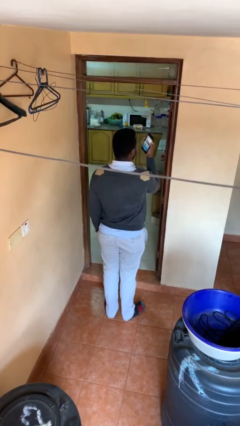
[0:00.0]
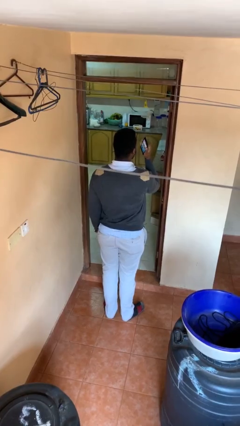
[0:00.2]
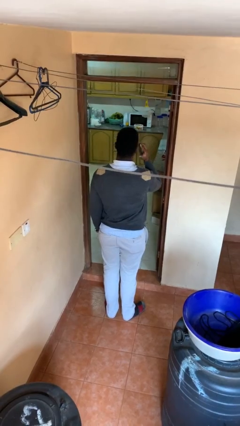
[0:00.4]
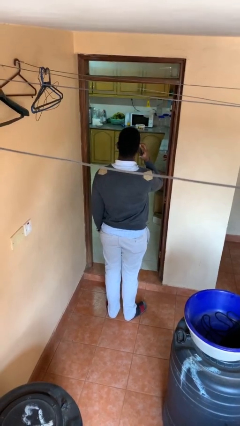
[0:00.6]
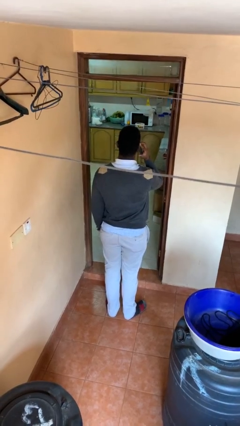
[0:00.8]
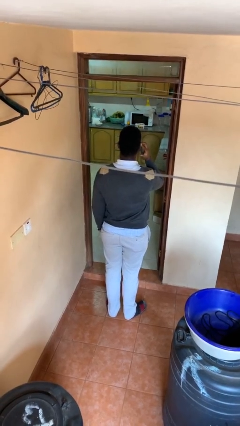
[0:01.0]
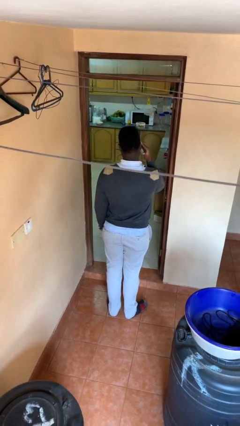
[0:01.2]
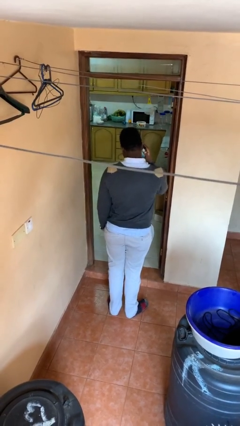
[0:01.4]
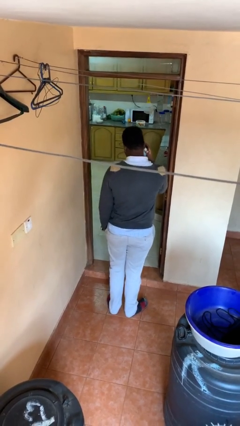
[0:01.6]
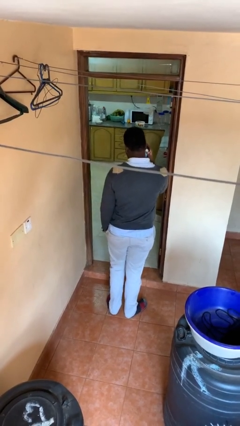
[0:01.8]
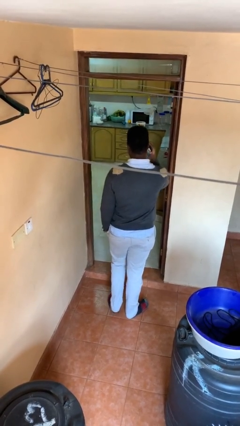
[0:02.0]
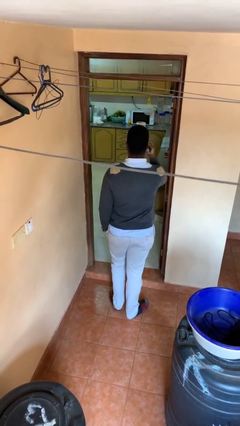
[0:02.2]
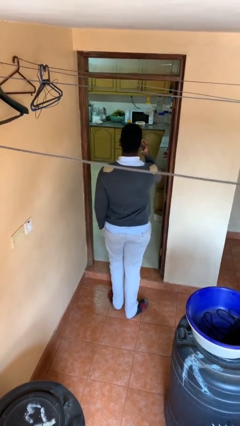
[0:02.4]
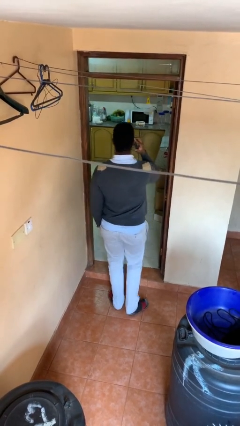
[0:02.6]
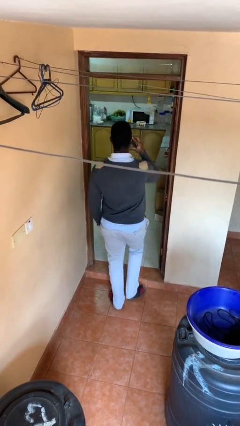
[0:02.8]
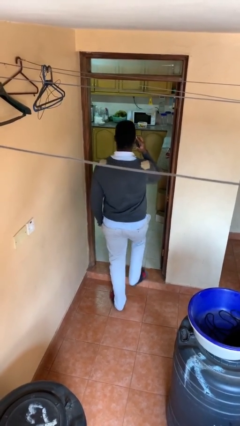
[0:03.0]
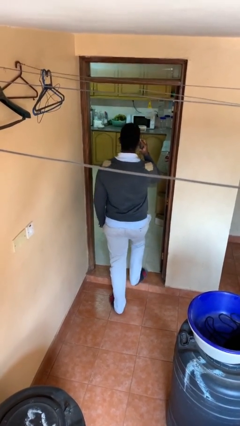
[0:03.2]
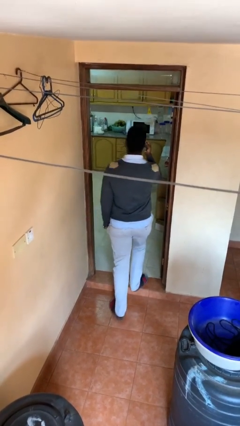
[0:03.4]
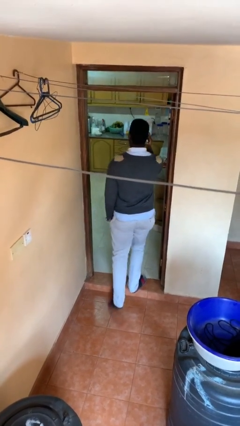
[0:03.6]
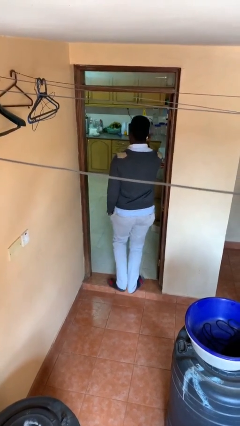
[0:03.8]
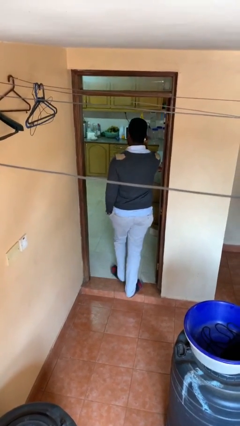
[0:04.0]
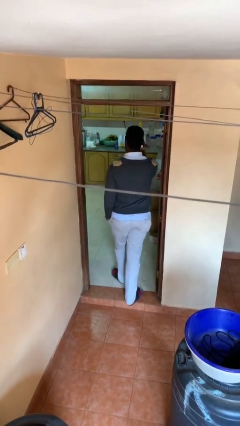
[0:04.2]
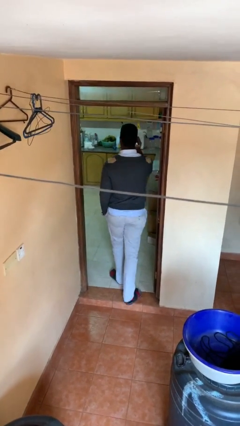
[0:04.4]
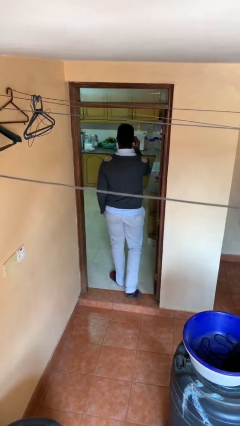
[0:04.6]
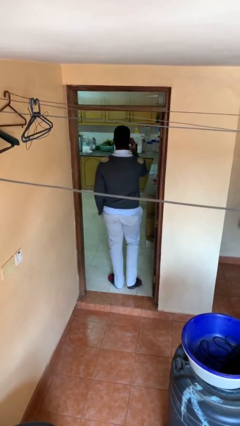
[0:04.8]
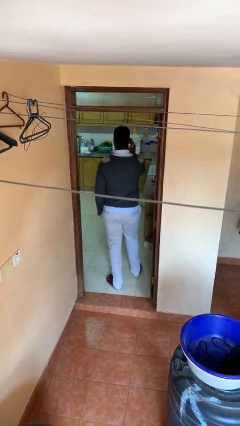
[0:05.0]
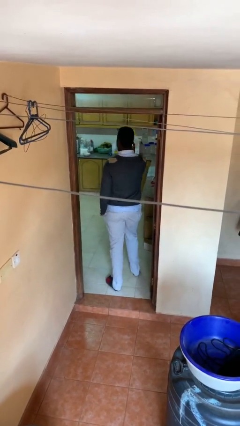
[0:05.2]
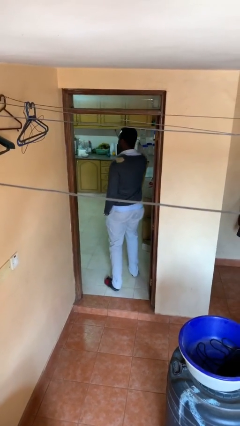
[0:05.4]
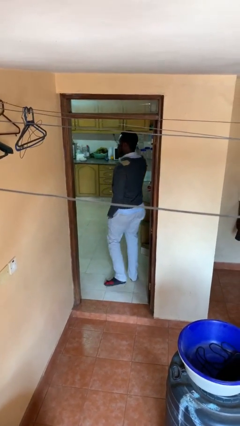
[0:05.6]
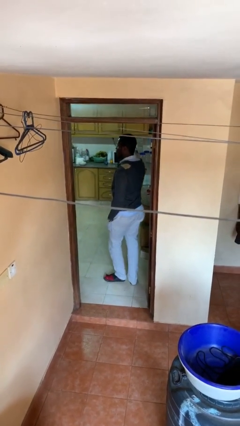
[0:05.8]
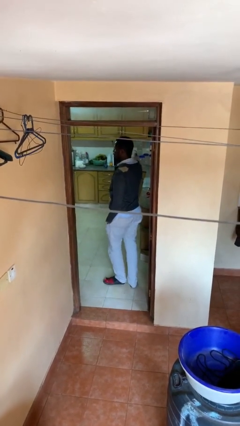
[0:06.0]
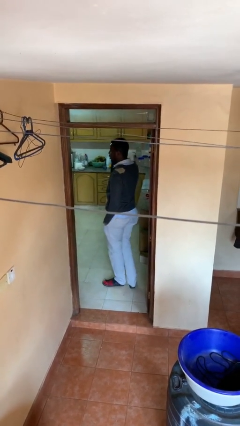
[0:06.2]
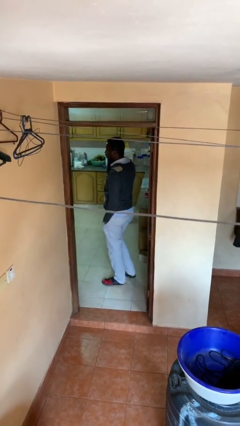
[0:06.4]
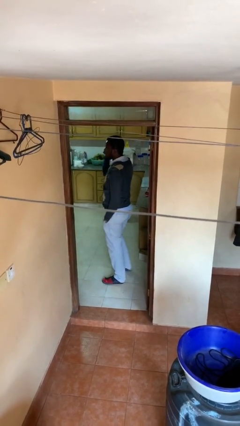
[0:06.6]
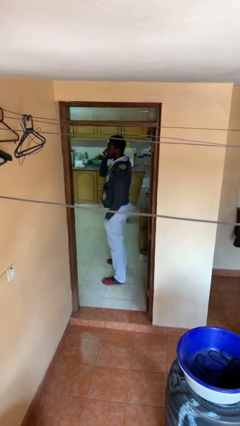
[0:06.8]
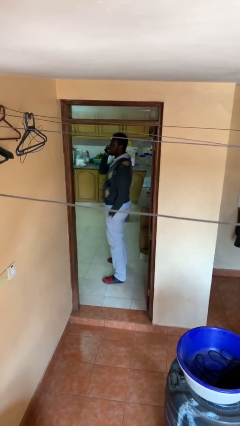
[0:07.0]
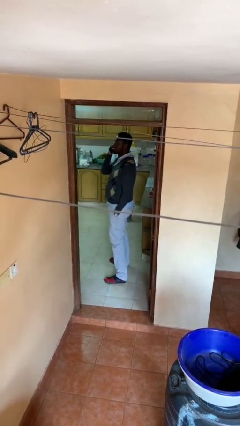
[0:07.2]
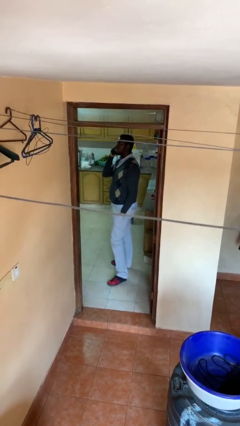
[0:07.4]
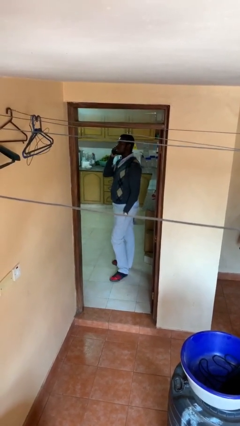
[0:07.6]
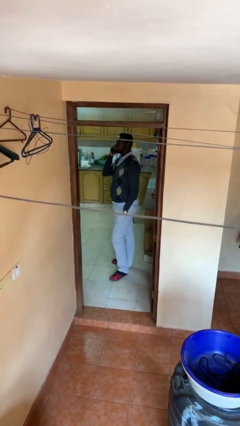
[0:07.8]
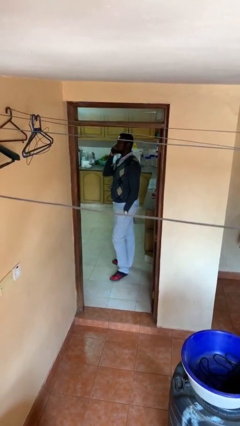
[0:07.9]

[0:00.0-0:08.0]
person exits scene through structure

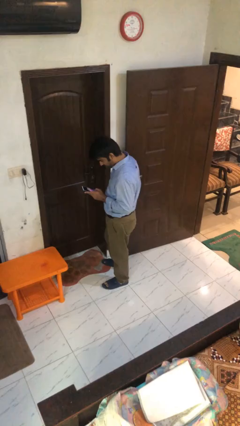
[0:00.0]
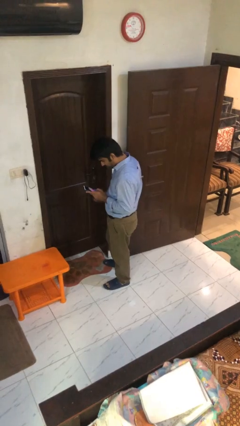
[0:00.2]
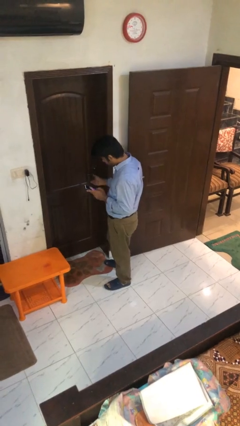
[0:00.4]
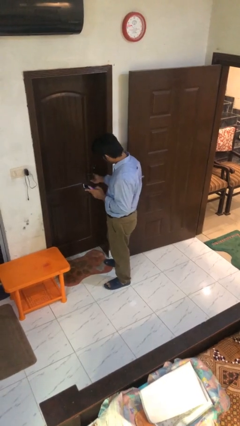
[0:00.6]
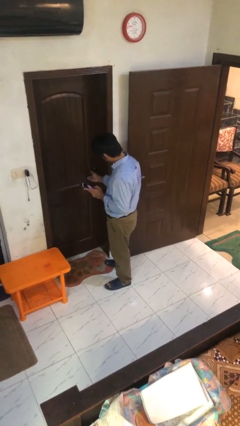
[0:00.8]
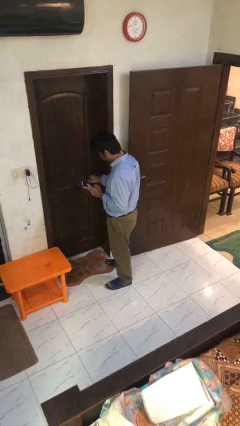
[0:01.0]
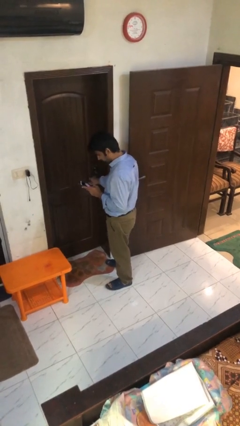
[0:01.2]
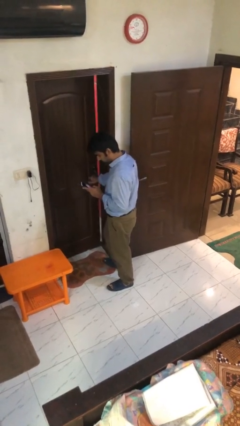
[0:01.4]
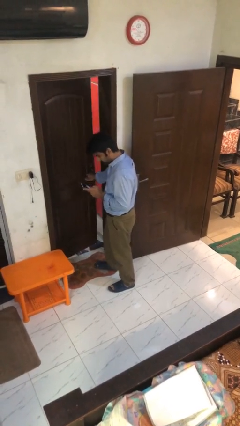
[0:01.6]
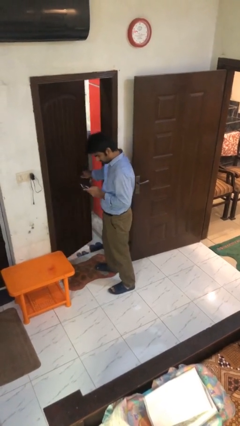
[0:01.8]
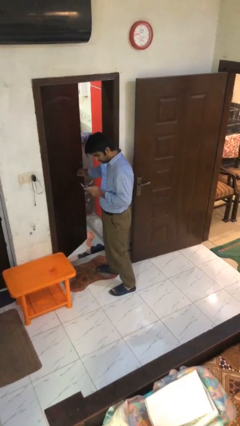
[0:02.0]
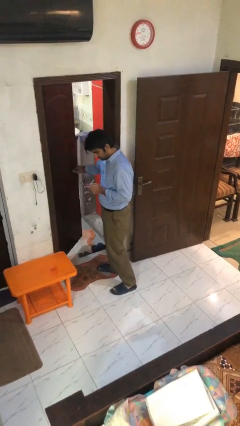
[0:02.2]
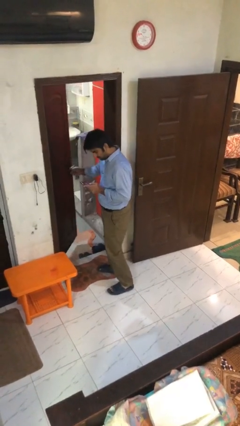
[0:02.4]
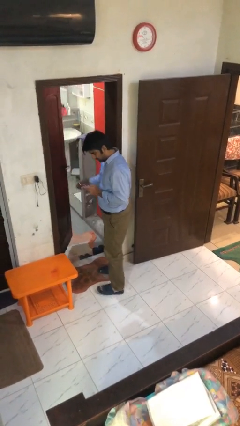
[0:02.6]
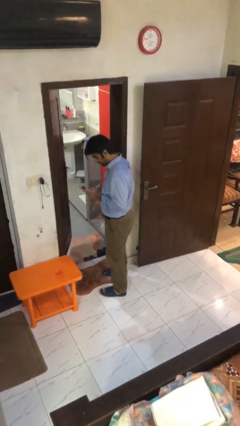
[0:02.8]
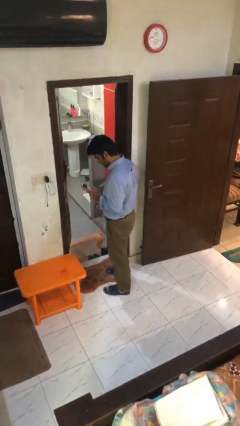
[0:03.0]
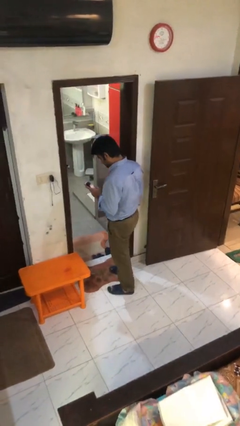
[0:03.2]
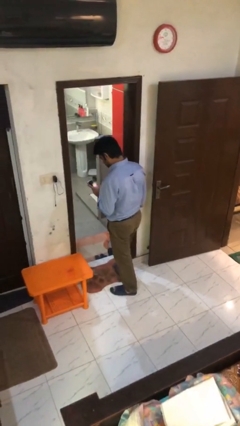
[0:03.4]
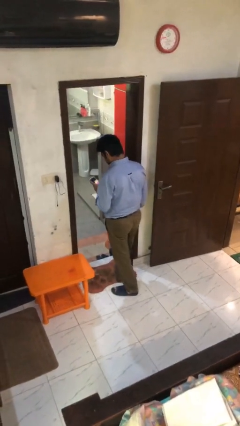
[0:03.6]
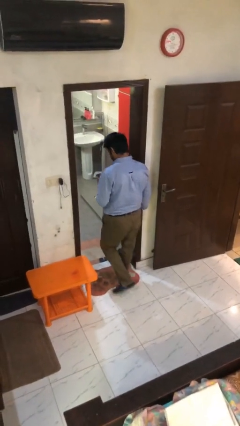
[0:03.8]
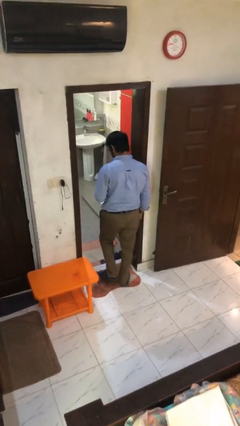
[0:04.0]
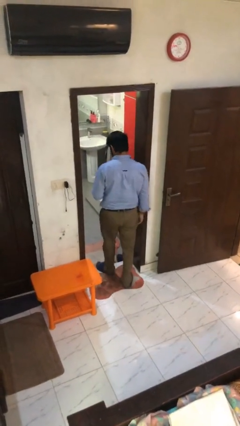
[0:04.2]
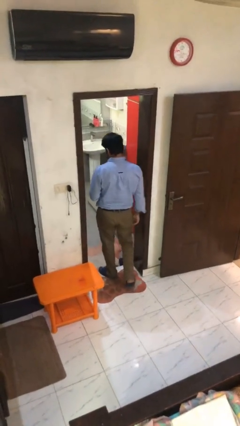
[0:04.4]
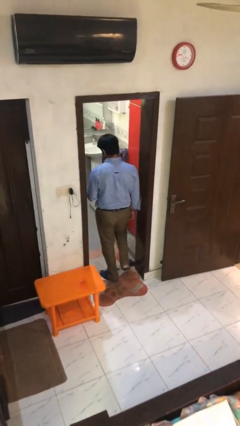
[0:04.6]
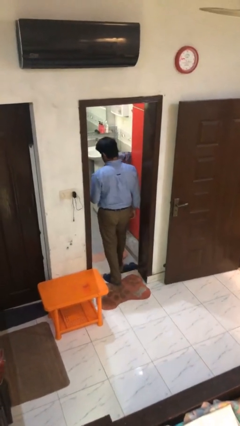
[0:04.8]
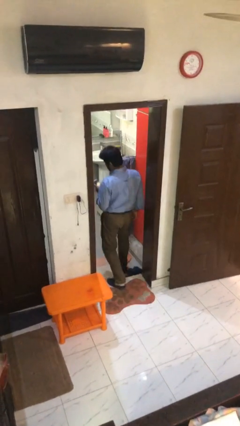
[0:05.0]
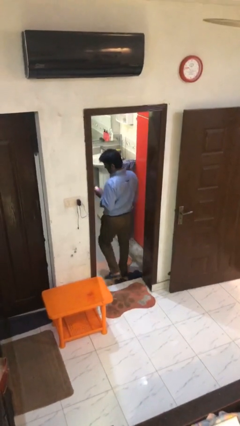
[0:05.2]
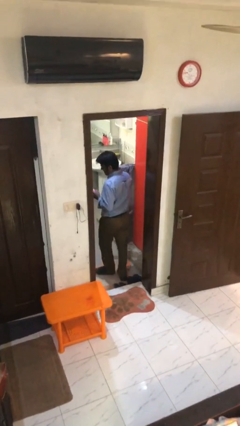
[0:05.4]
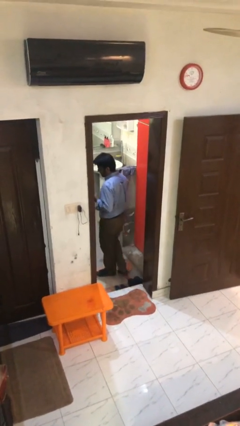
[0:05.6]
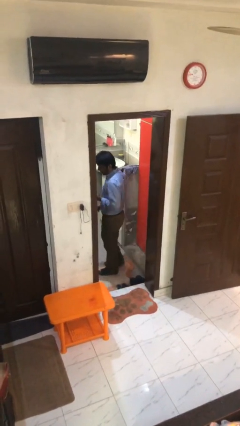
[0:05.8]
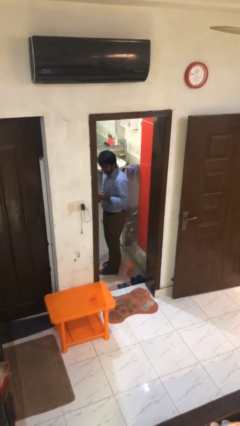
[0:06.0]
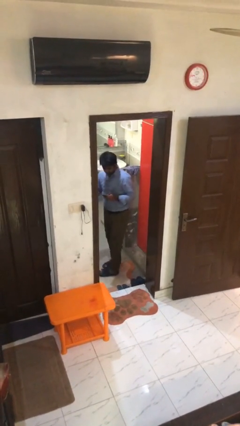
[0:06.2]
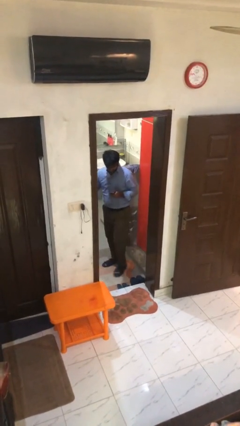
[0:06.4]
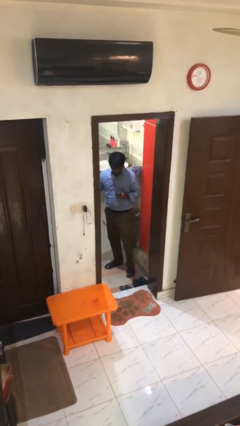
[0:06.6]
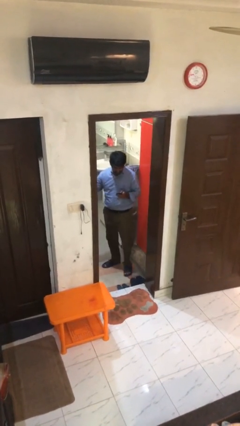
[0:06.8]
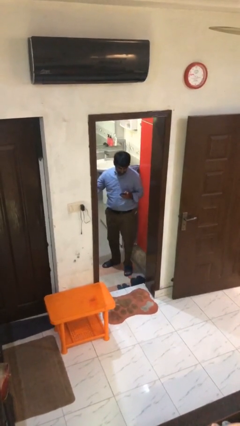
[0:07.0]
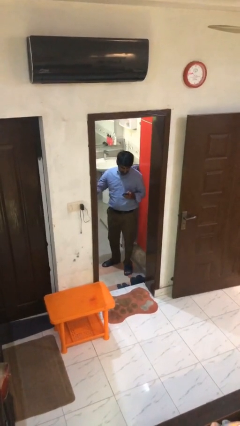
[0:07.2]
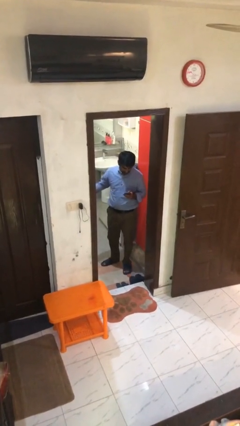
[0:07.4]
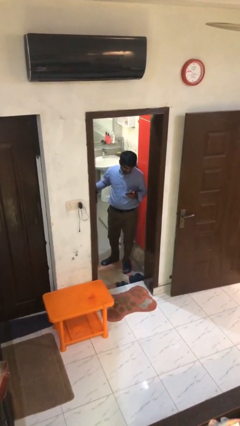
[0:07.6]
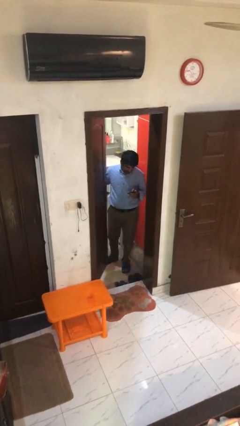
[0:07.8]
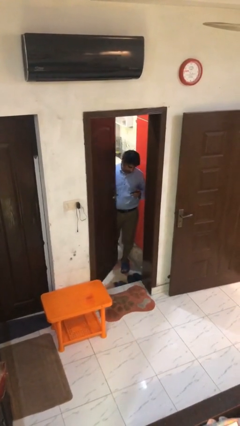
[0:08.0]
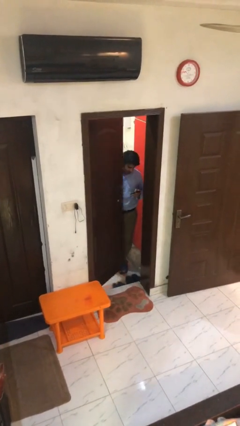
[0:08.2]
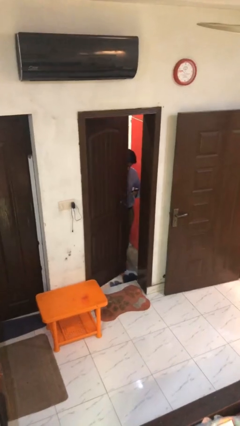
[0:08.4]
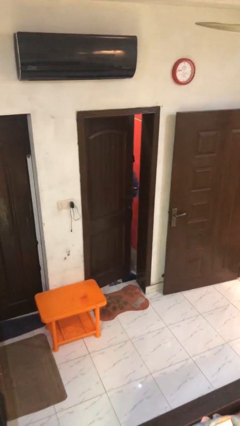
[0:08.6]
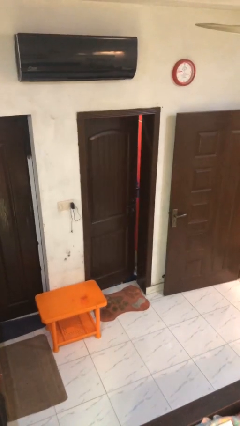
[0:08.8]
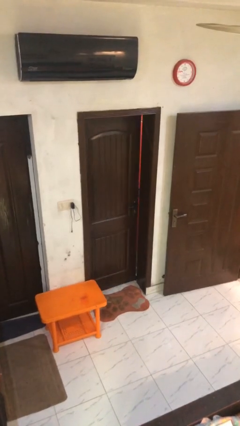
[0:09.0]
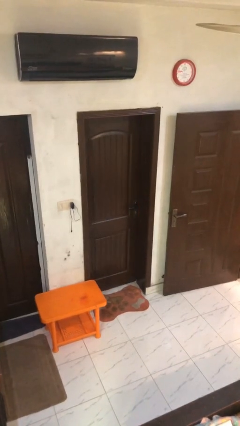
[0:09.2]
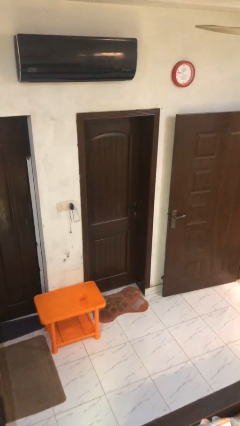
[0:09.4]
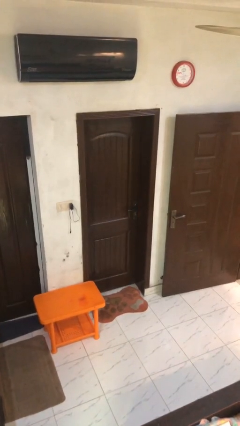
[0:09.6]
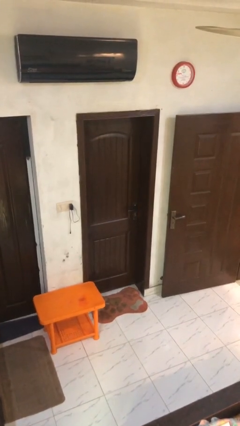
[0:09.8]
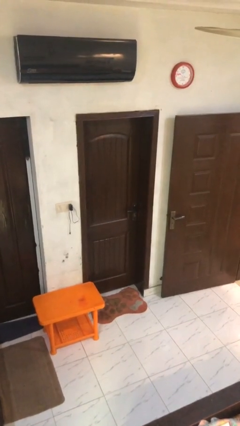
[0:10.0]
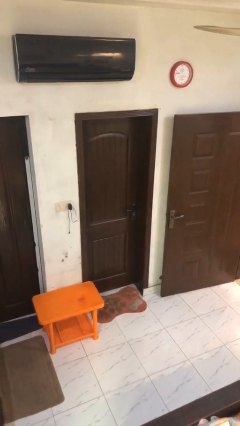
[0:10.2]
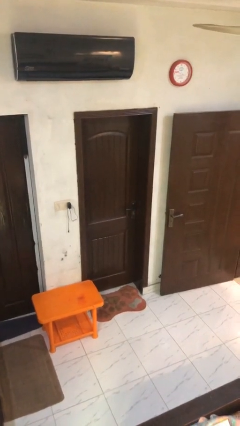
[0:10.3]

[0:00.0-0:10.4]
person texts on phone
